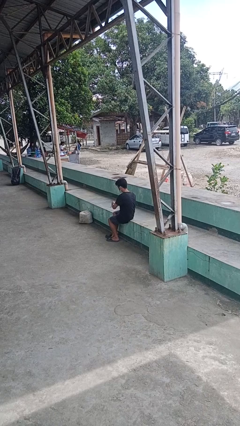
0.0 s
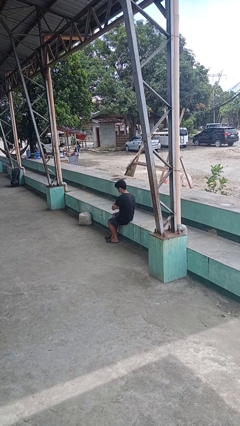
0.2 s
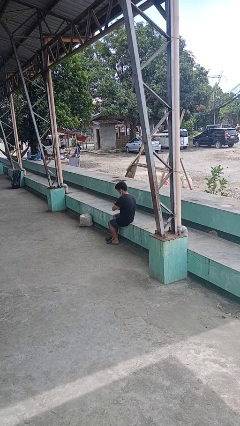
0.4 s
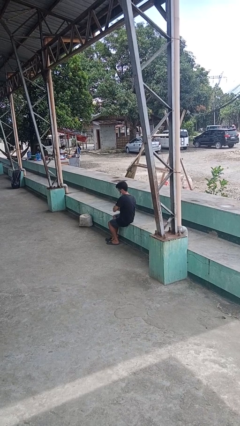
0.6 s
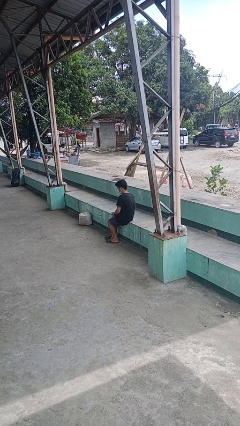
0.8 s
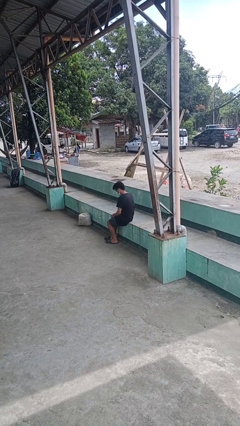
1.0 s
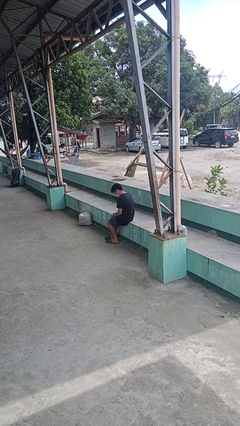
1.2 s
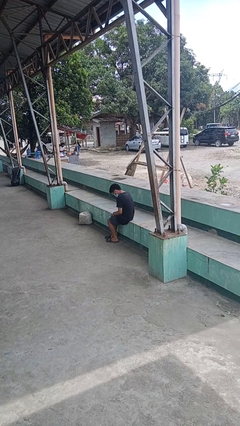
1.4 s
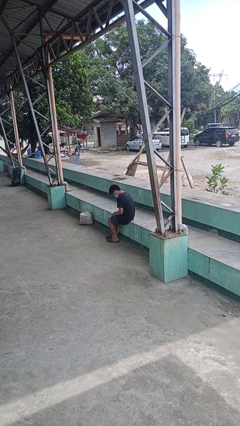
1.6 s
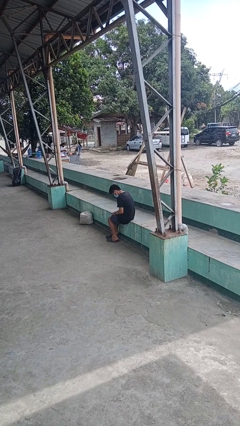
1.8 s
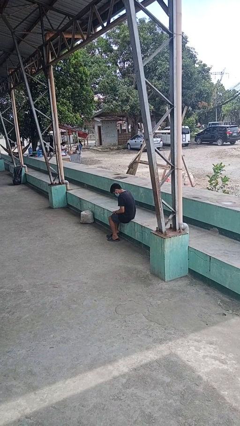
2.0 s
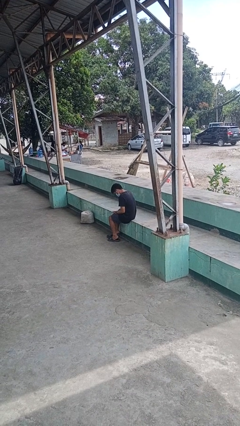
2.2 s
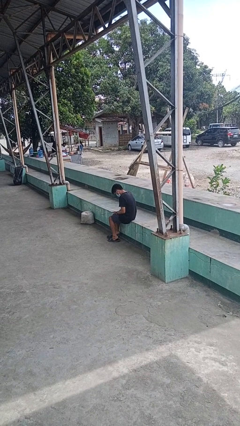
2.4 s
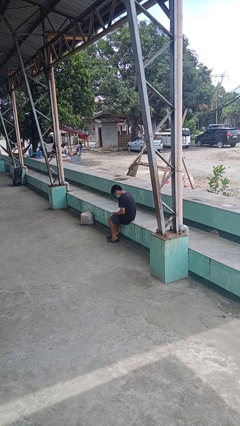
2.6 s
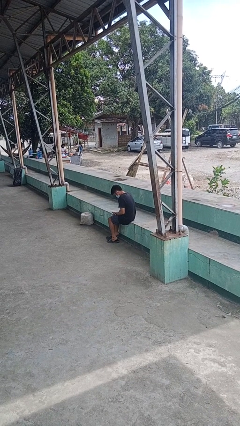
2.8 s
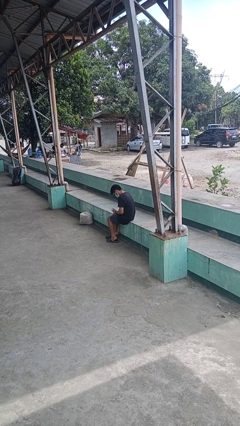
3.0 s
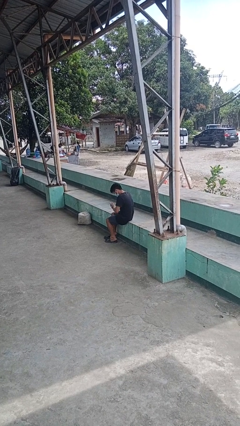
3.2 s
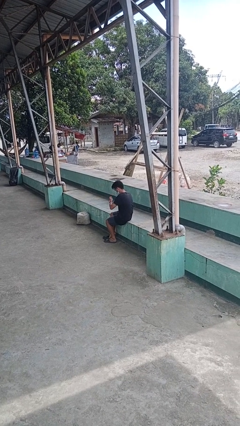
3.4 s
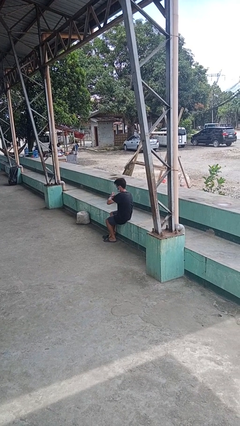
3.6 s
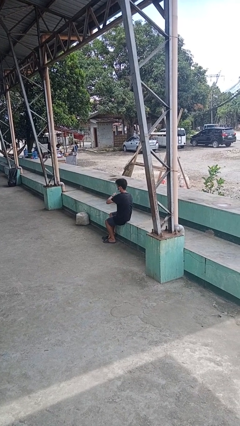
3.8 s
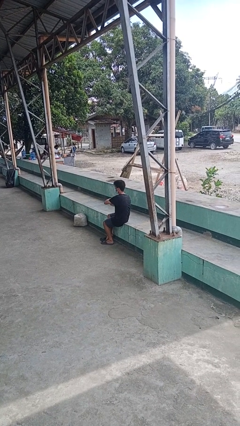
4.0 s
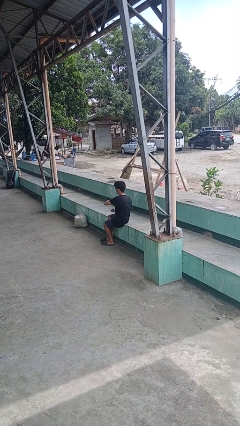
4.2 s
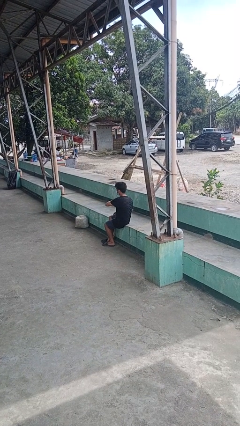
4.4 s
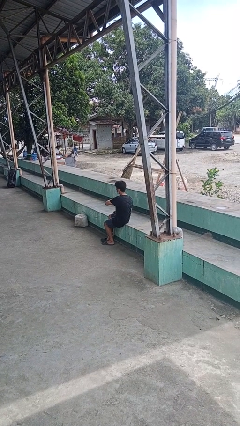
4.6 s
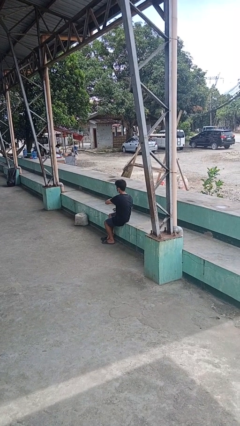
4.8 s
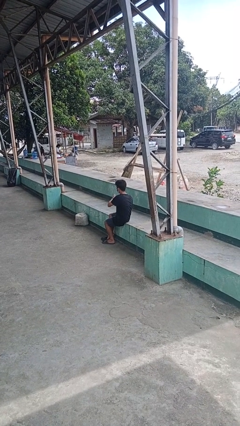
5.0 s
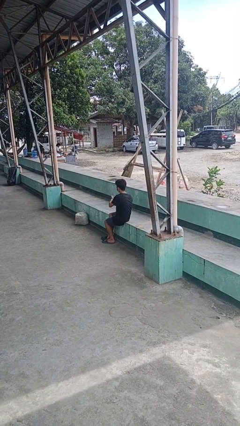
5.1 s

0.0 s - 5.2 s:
person puts on wristwatch

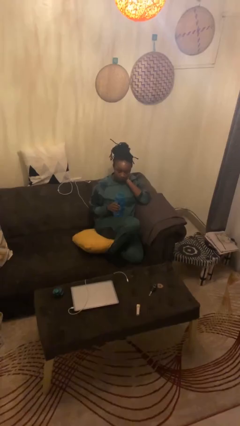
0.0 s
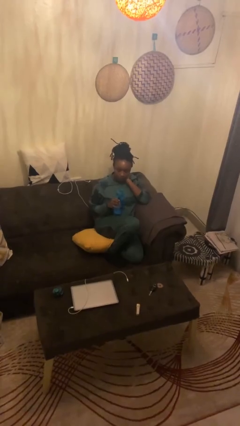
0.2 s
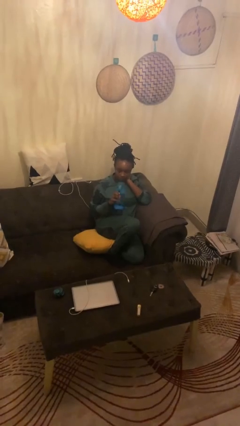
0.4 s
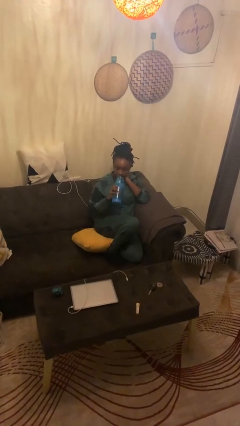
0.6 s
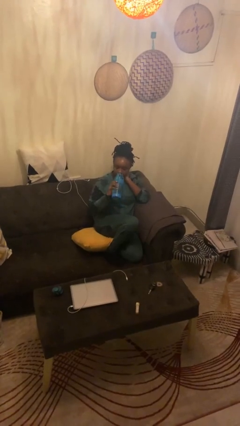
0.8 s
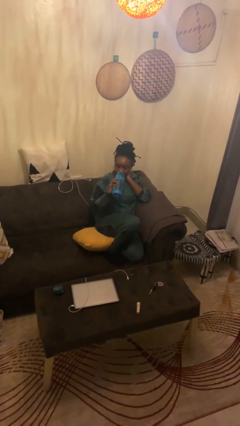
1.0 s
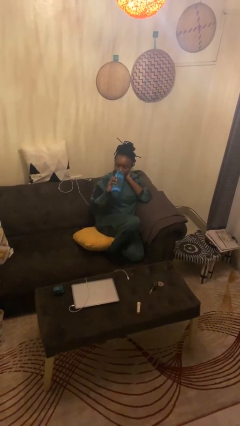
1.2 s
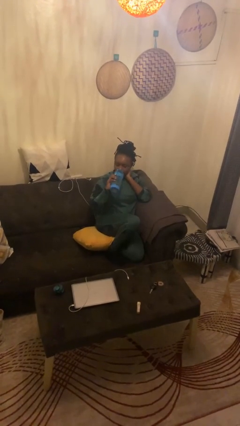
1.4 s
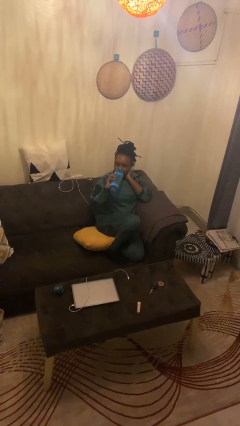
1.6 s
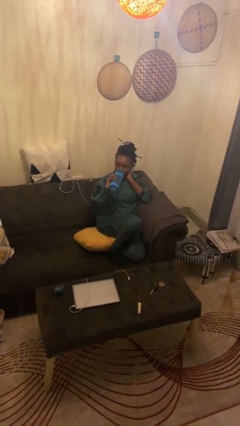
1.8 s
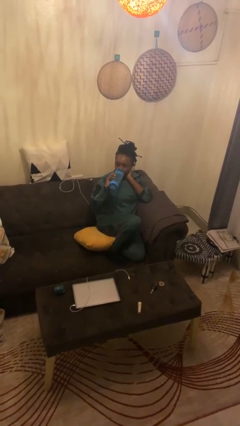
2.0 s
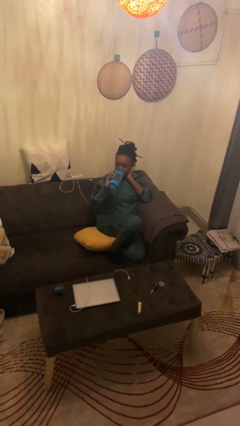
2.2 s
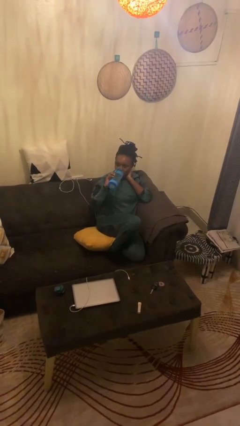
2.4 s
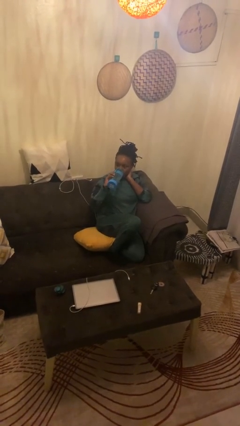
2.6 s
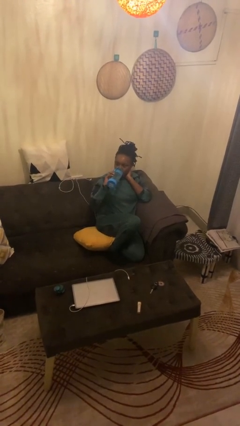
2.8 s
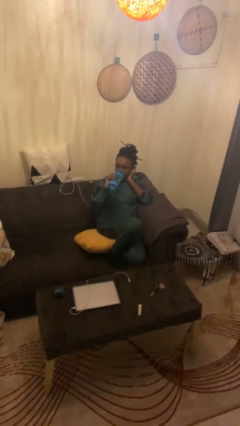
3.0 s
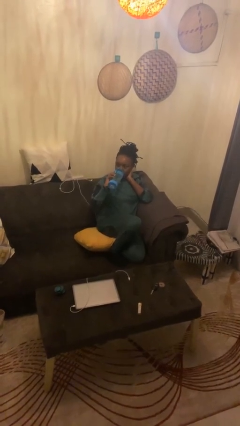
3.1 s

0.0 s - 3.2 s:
person drinks from bottle

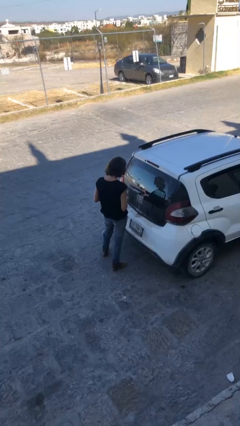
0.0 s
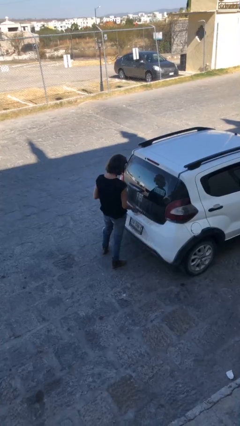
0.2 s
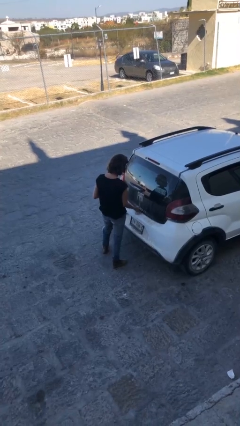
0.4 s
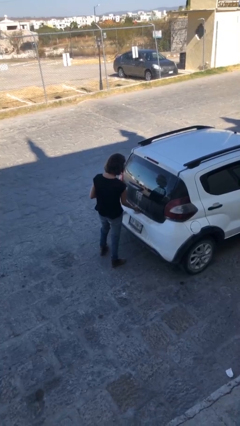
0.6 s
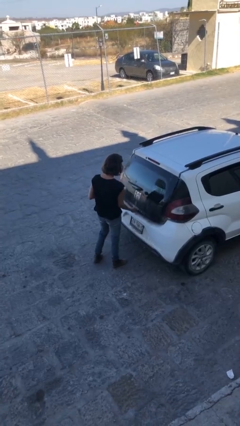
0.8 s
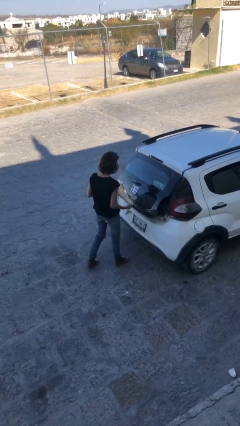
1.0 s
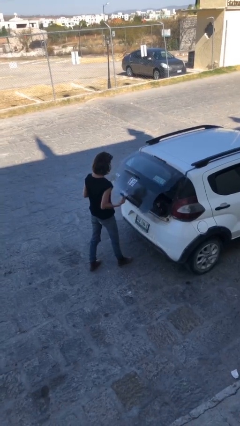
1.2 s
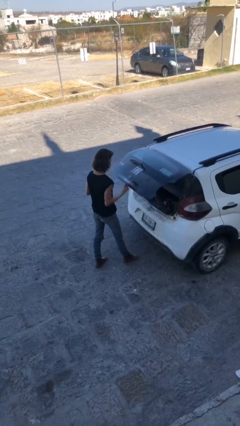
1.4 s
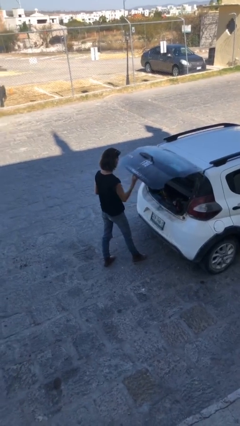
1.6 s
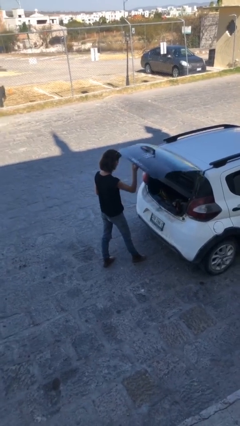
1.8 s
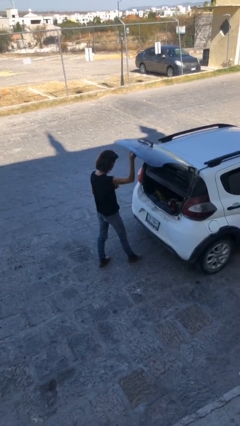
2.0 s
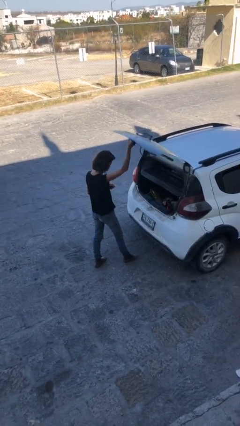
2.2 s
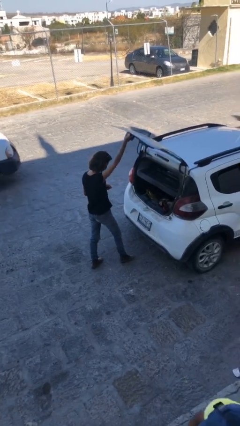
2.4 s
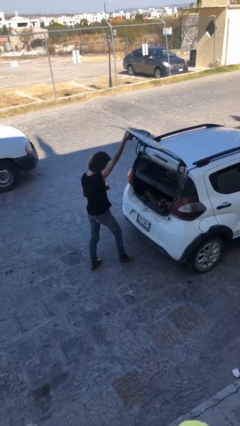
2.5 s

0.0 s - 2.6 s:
person opens car trunk

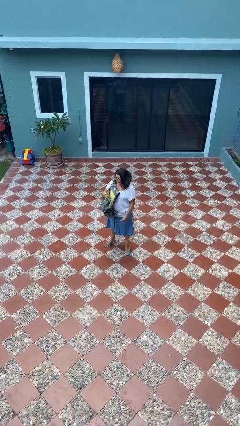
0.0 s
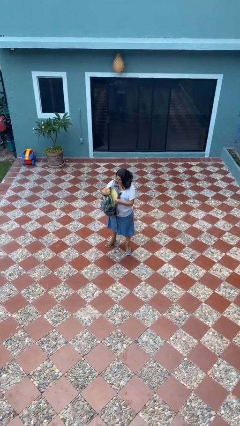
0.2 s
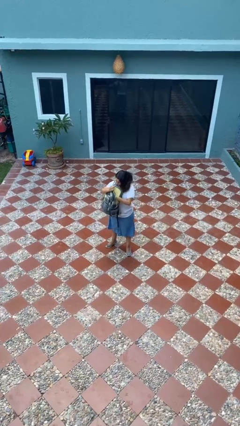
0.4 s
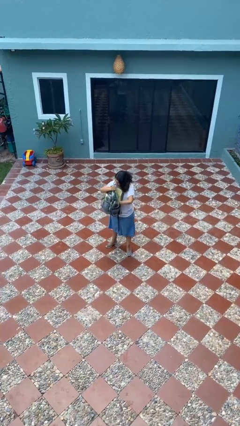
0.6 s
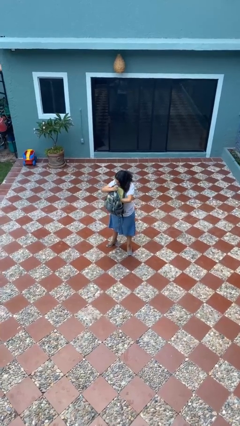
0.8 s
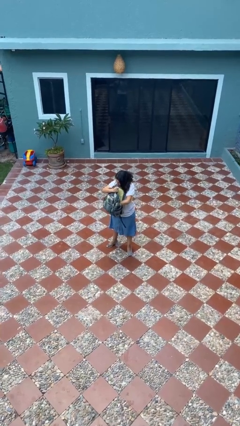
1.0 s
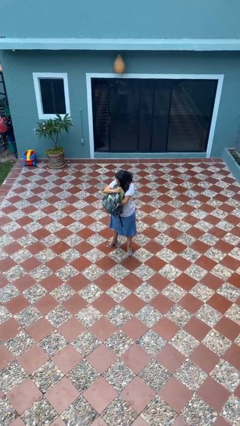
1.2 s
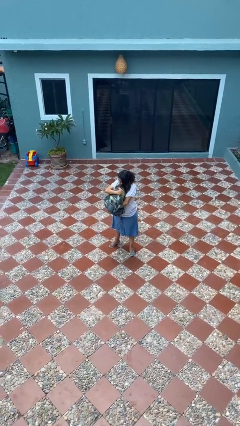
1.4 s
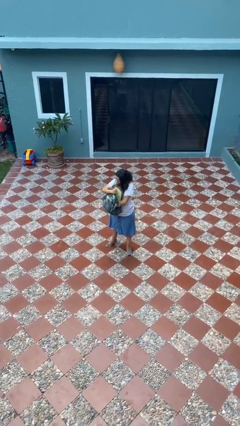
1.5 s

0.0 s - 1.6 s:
person searches in backpack

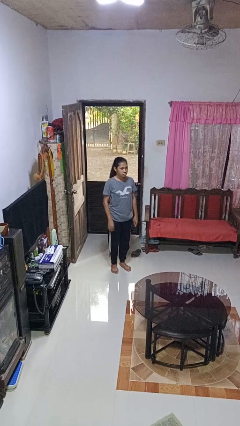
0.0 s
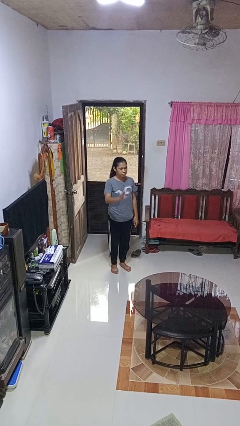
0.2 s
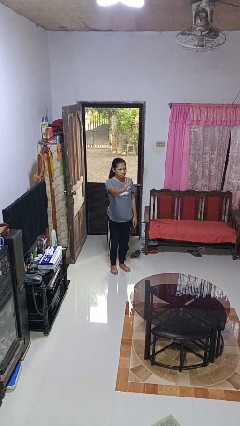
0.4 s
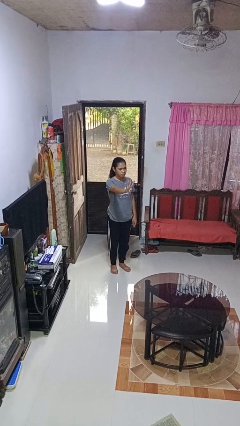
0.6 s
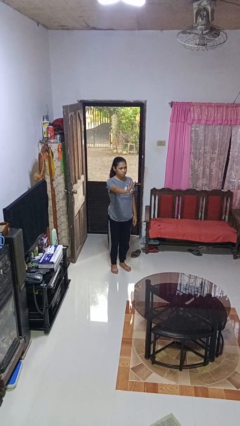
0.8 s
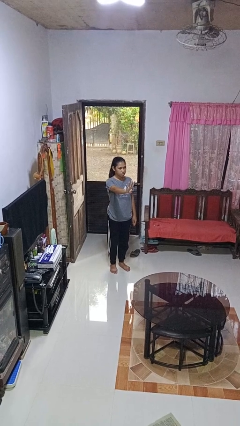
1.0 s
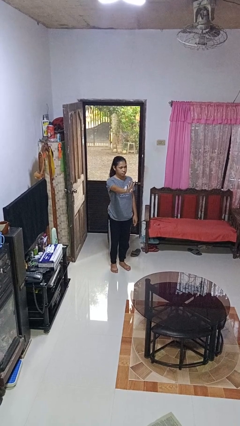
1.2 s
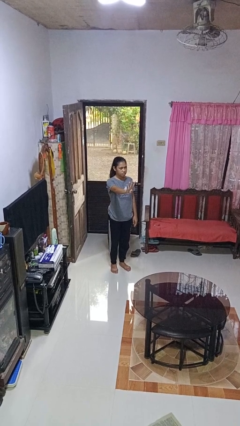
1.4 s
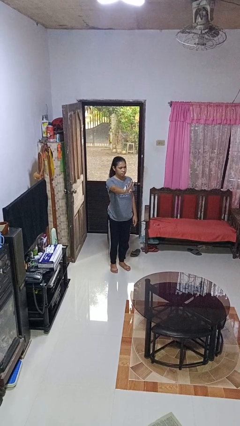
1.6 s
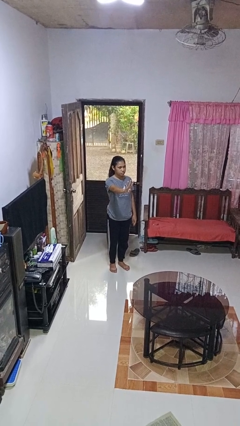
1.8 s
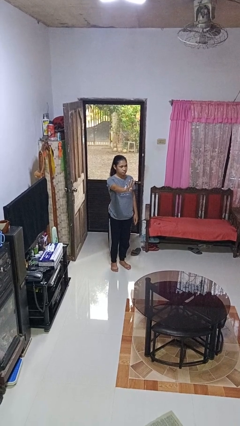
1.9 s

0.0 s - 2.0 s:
person gestures number four

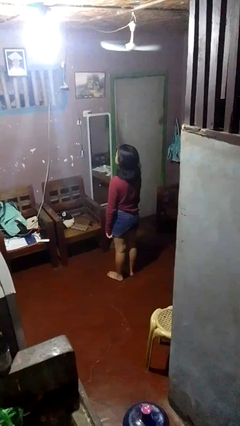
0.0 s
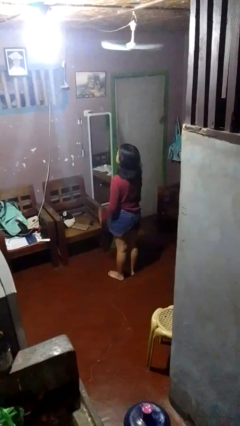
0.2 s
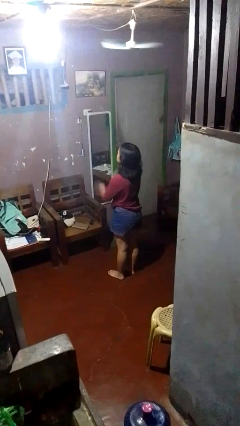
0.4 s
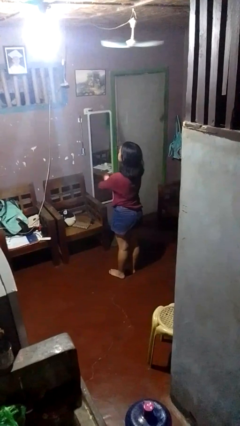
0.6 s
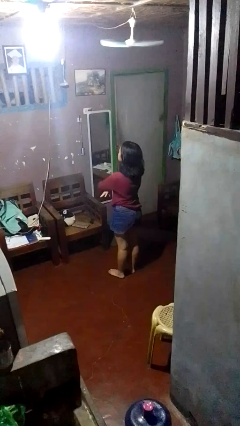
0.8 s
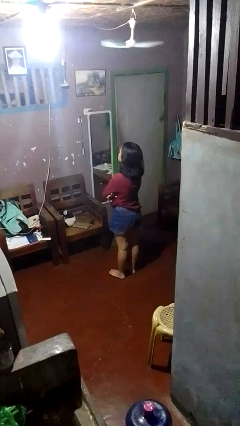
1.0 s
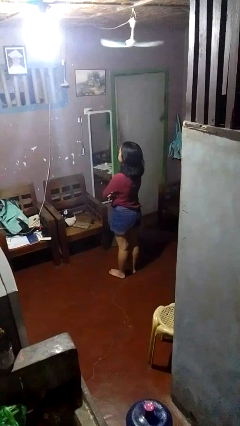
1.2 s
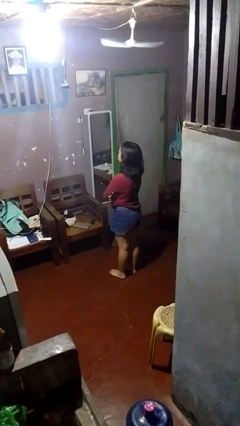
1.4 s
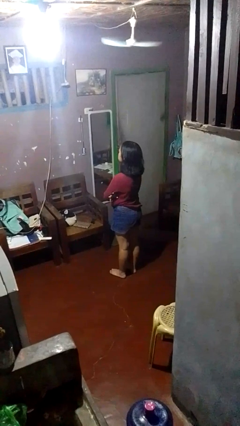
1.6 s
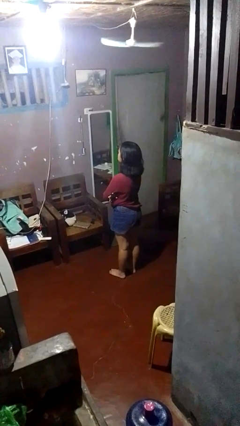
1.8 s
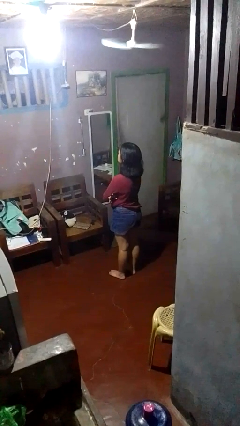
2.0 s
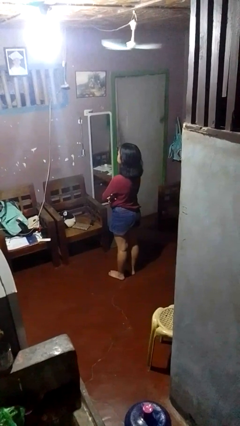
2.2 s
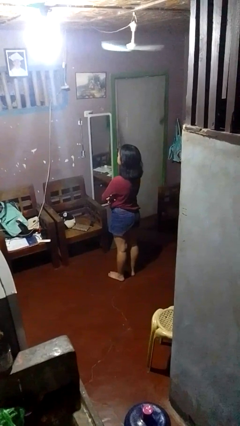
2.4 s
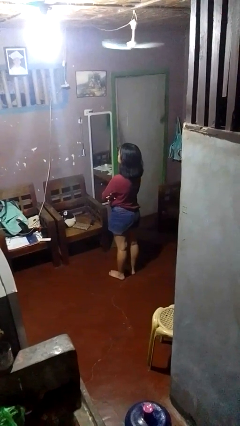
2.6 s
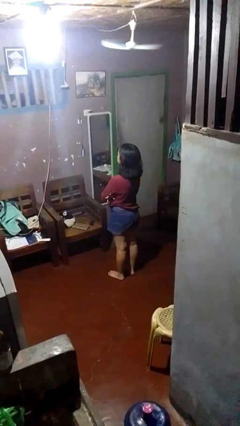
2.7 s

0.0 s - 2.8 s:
person crosses arms

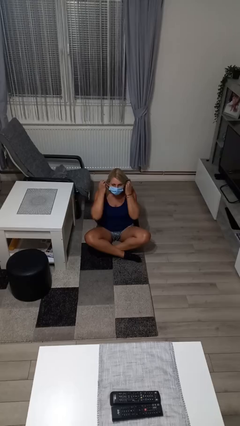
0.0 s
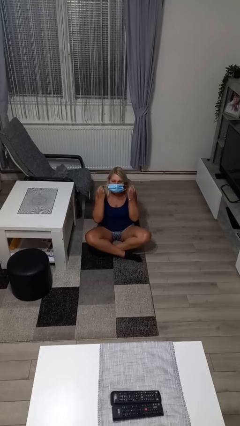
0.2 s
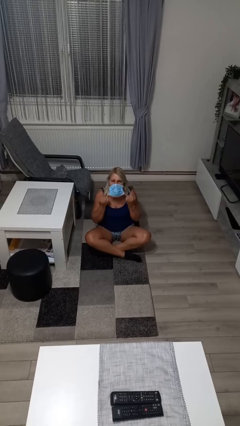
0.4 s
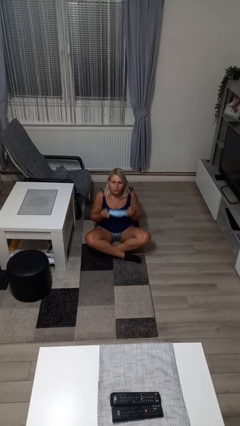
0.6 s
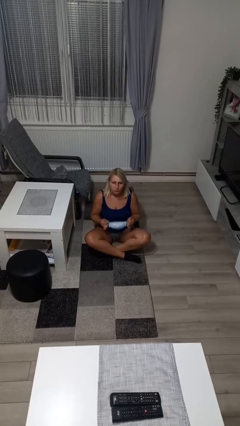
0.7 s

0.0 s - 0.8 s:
person takes off facemask
